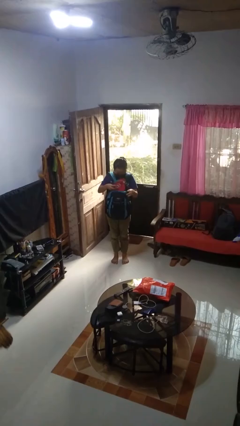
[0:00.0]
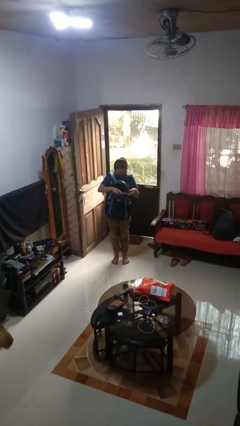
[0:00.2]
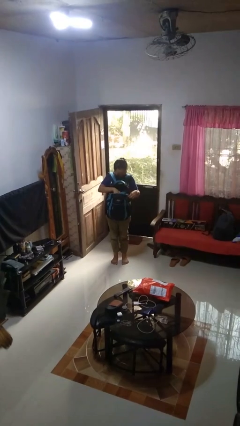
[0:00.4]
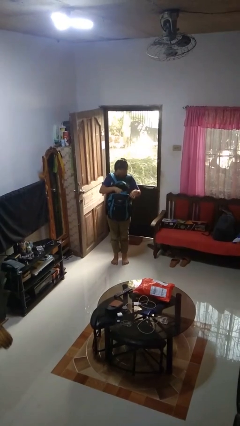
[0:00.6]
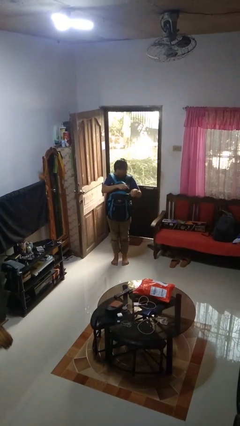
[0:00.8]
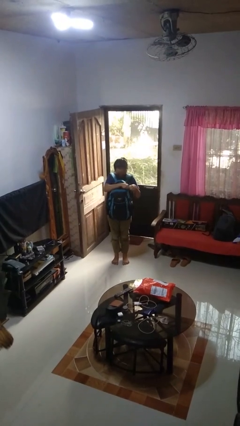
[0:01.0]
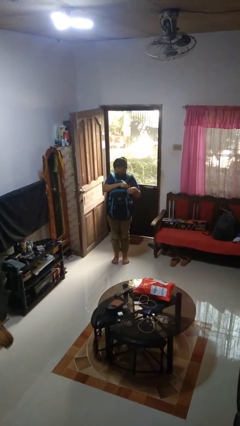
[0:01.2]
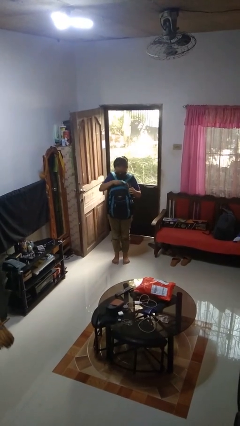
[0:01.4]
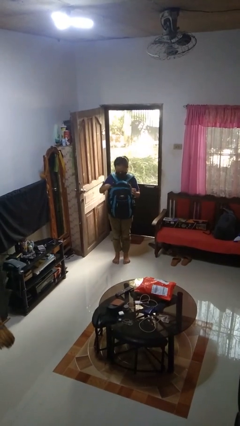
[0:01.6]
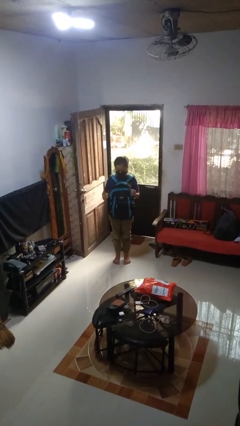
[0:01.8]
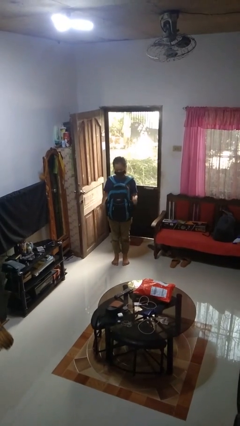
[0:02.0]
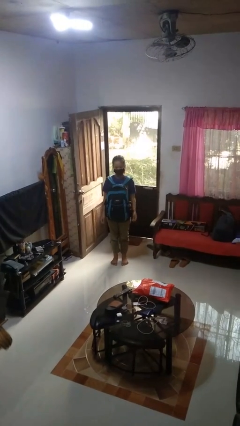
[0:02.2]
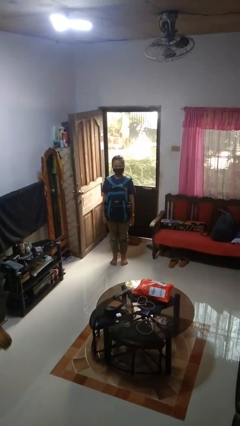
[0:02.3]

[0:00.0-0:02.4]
person puts object into backpack

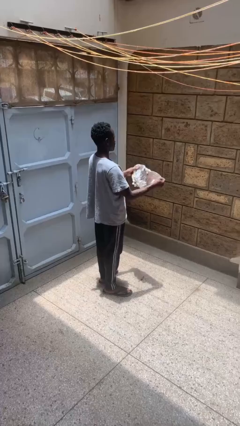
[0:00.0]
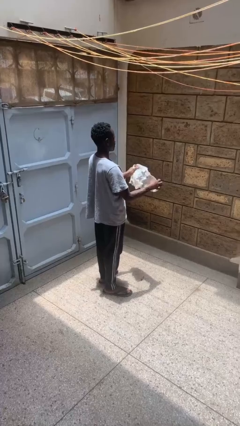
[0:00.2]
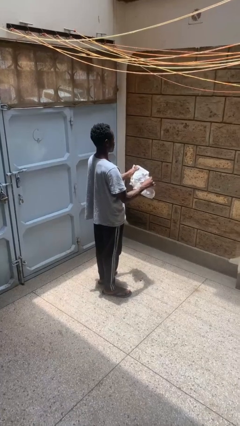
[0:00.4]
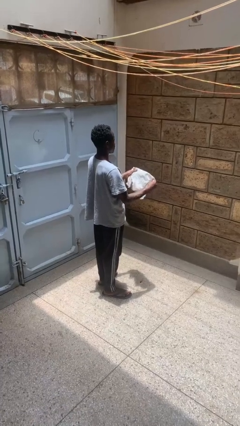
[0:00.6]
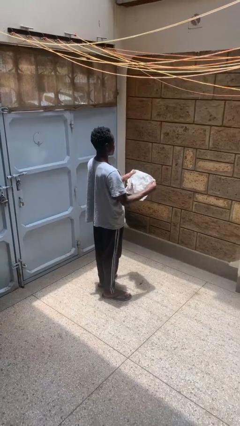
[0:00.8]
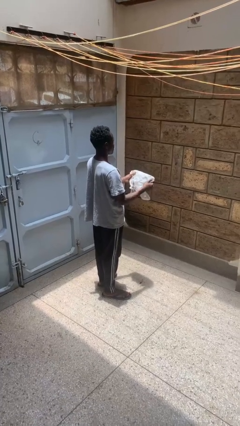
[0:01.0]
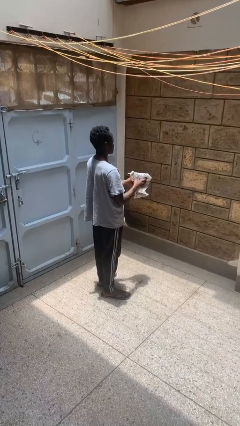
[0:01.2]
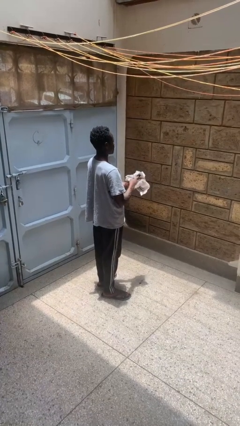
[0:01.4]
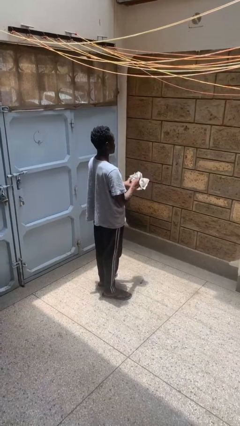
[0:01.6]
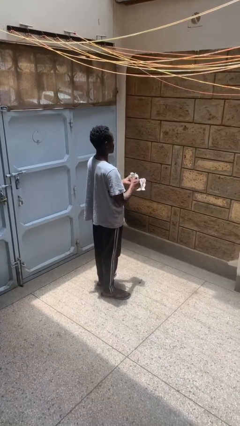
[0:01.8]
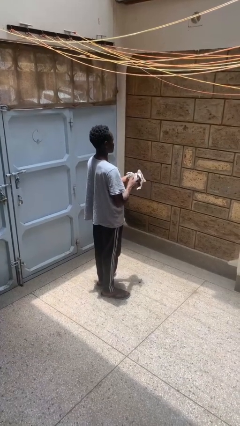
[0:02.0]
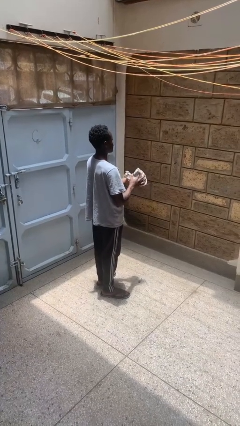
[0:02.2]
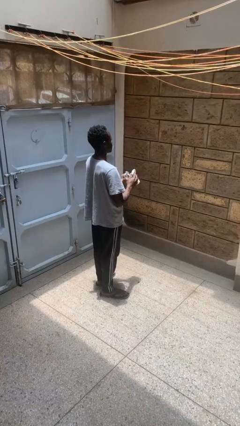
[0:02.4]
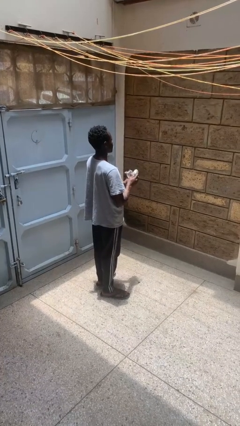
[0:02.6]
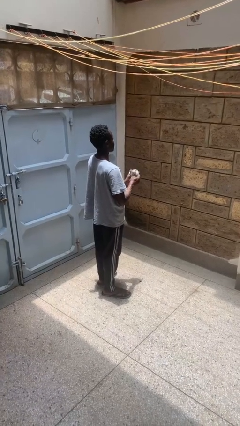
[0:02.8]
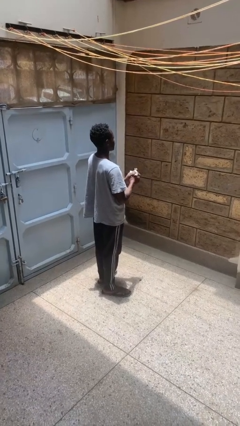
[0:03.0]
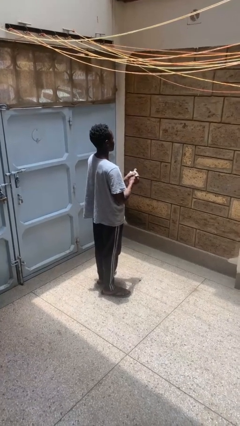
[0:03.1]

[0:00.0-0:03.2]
person crumples paper

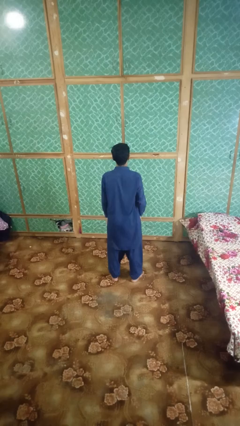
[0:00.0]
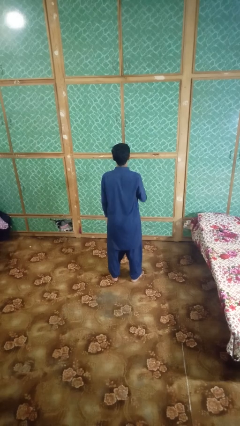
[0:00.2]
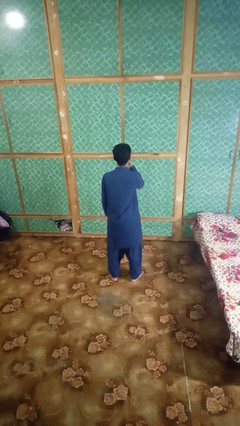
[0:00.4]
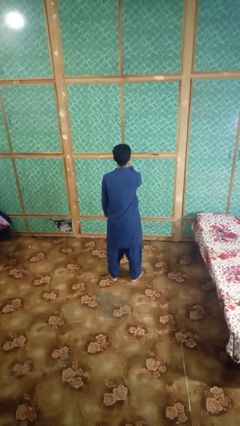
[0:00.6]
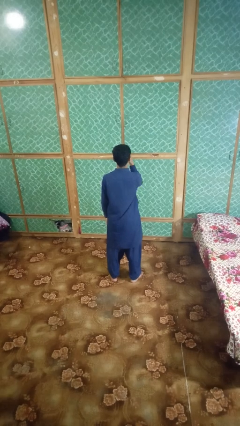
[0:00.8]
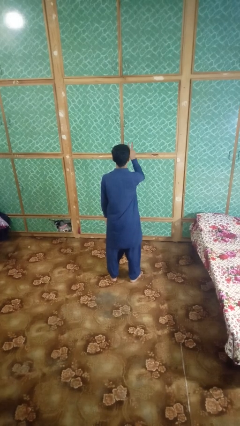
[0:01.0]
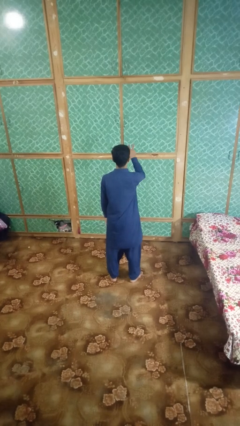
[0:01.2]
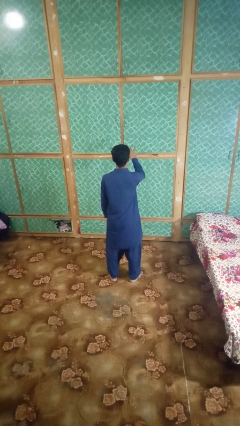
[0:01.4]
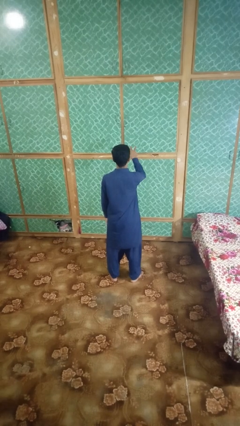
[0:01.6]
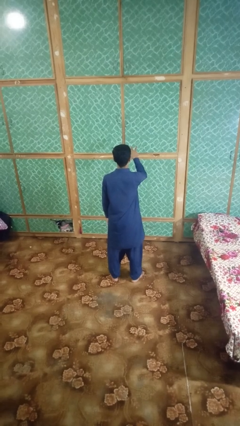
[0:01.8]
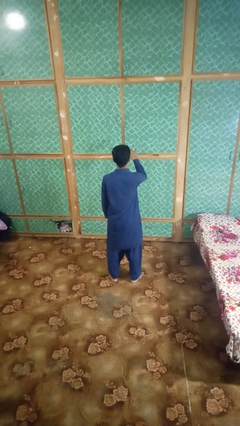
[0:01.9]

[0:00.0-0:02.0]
person gestures watch closely

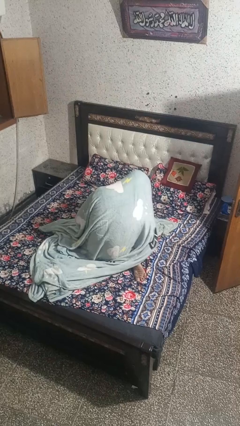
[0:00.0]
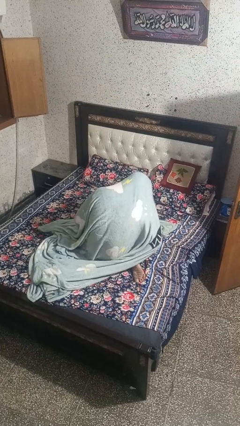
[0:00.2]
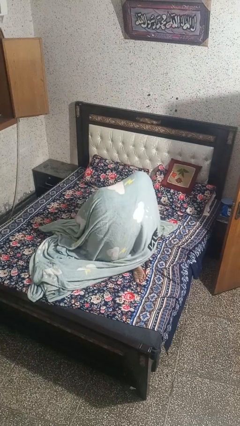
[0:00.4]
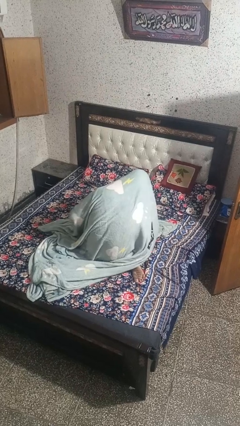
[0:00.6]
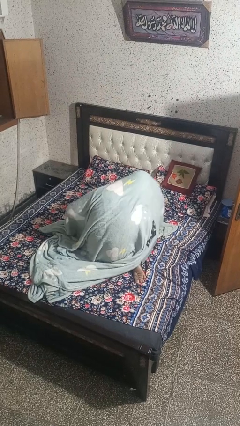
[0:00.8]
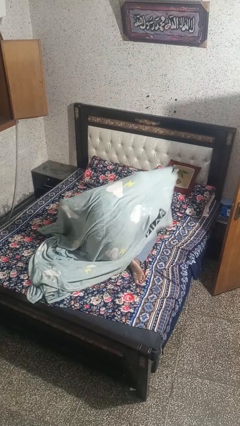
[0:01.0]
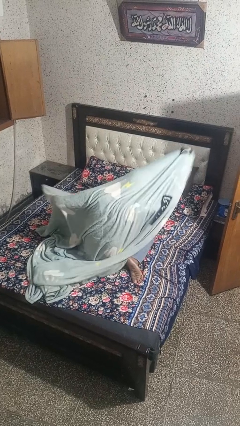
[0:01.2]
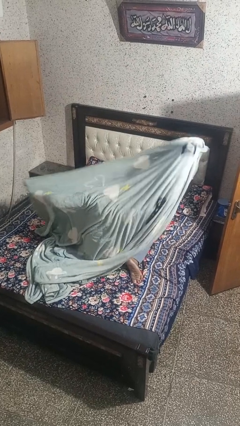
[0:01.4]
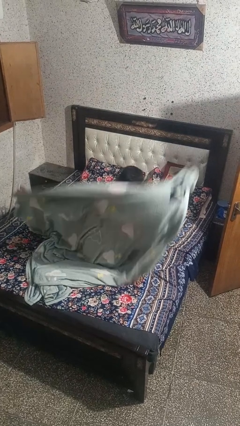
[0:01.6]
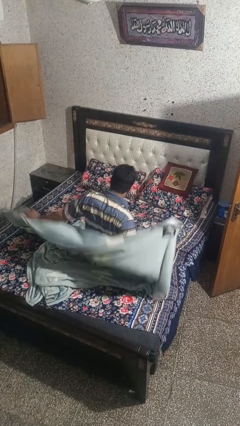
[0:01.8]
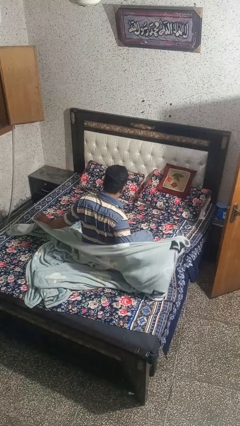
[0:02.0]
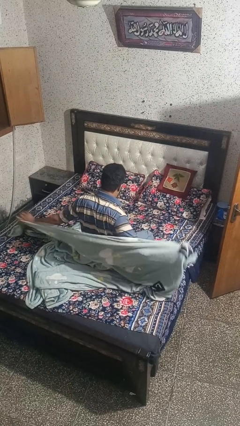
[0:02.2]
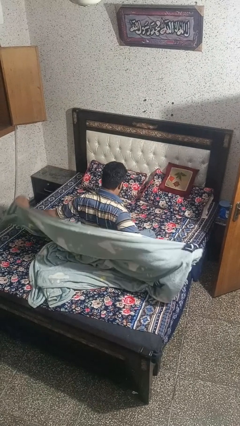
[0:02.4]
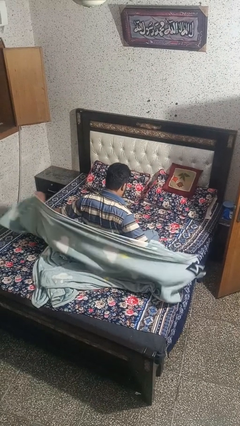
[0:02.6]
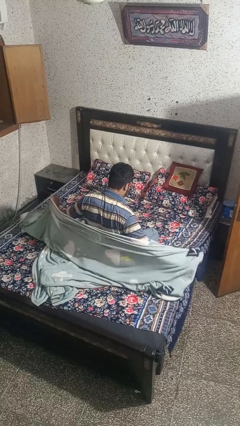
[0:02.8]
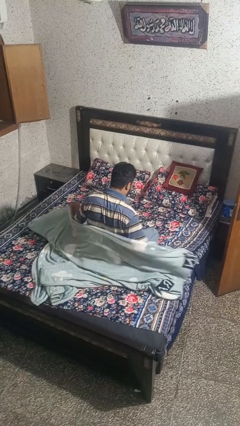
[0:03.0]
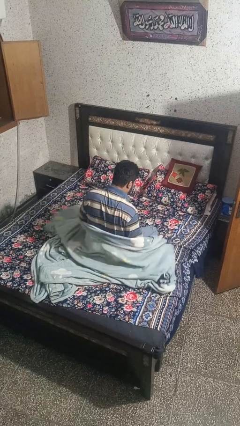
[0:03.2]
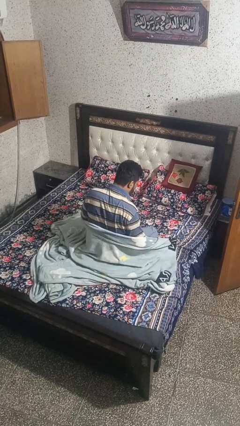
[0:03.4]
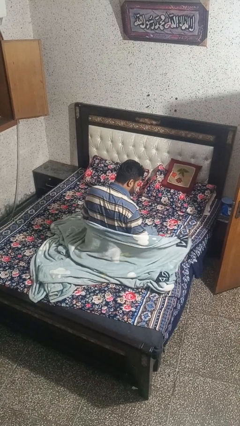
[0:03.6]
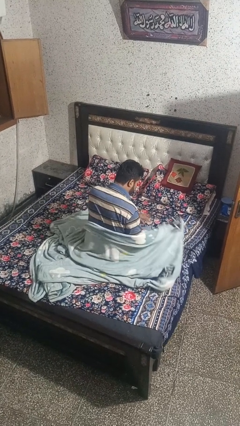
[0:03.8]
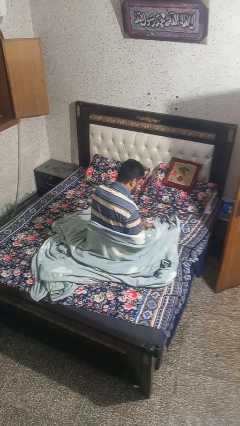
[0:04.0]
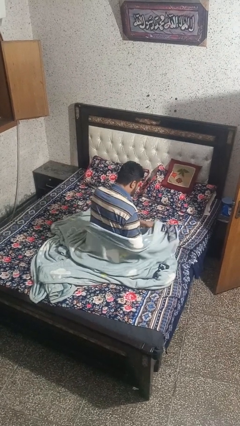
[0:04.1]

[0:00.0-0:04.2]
person uncovers with blanket

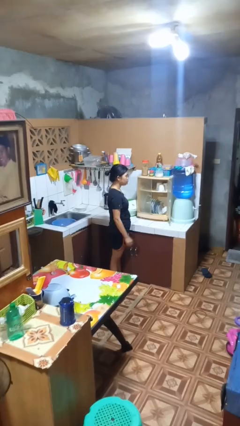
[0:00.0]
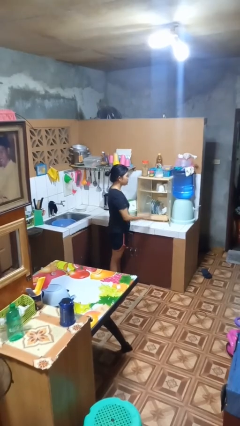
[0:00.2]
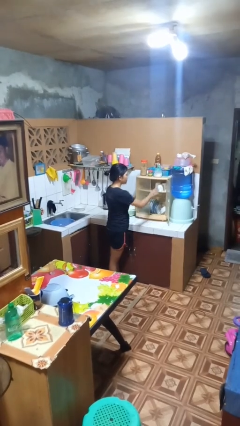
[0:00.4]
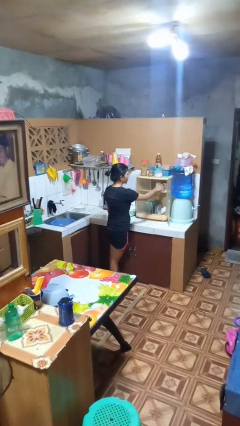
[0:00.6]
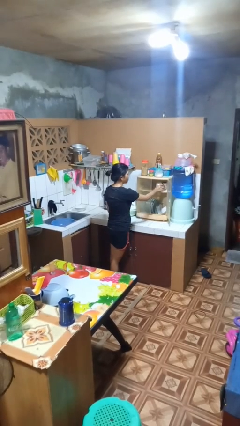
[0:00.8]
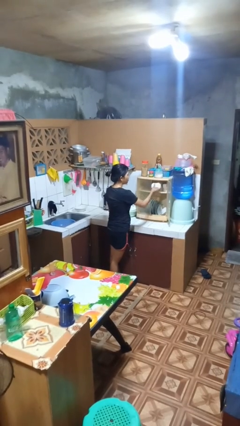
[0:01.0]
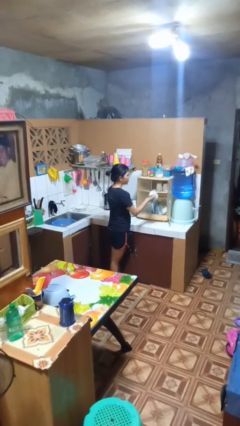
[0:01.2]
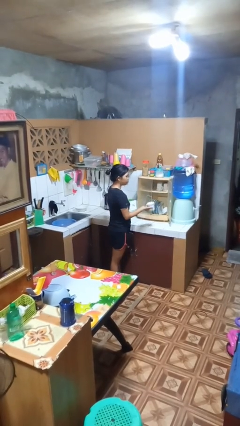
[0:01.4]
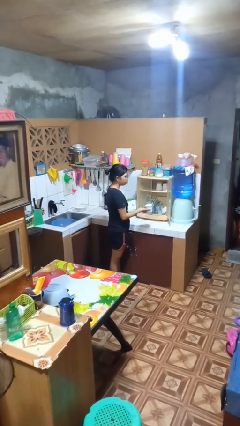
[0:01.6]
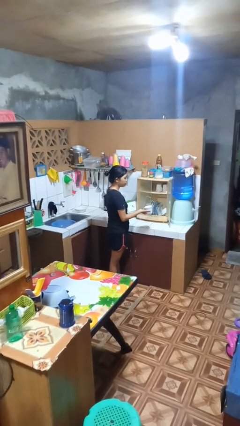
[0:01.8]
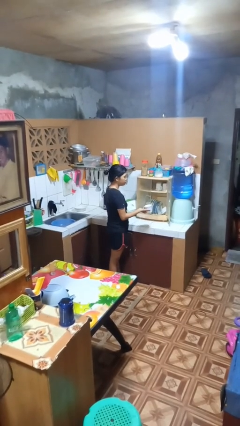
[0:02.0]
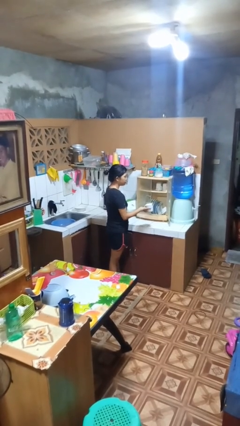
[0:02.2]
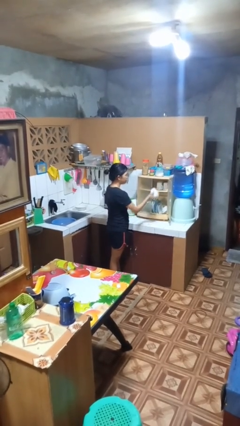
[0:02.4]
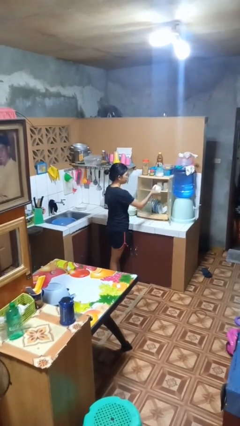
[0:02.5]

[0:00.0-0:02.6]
person takes object from kitchen drawer

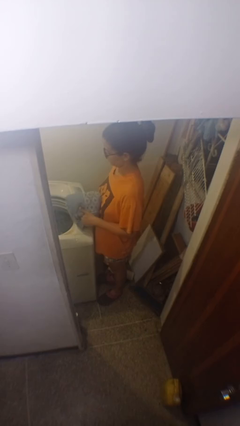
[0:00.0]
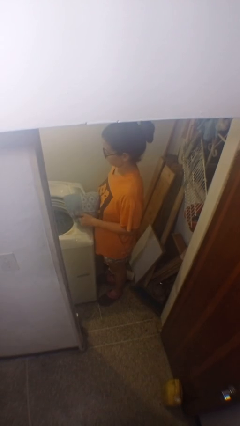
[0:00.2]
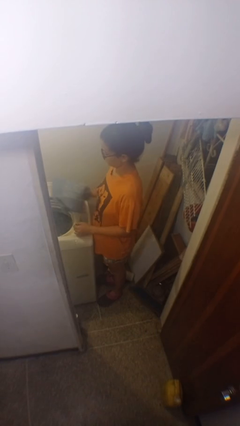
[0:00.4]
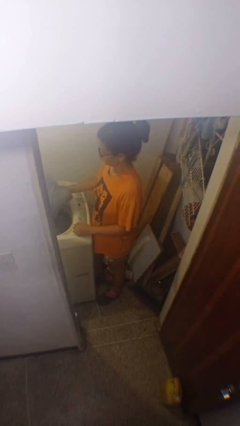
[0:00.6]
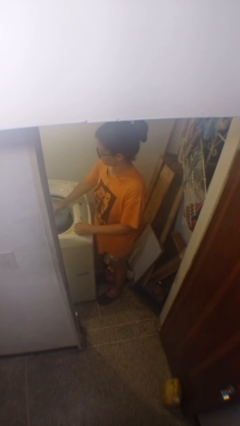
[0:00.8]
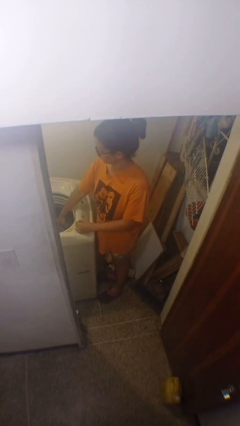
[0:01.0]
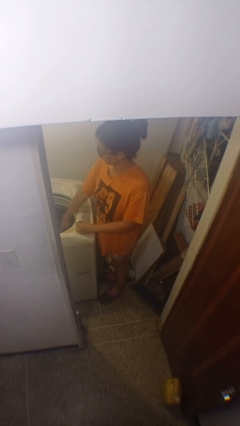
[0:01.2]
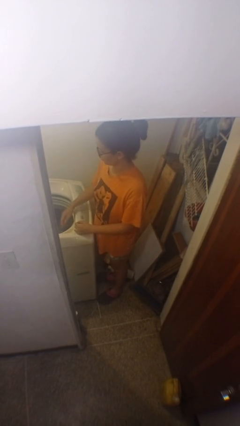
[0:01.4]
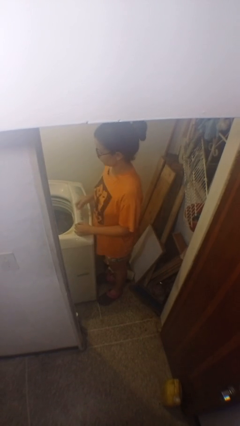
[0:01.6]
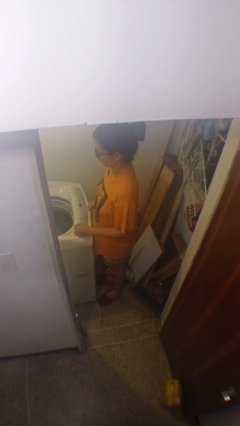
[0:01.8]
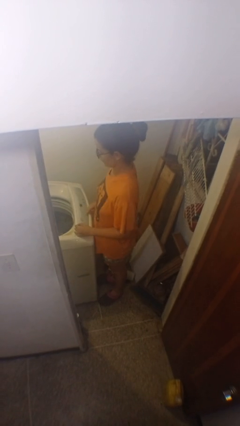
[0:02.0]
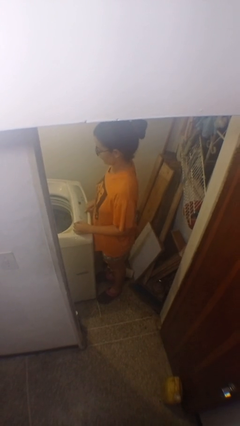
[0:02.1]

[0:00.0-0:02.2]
person loads clotheswasher

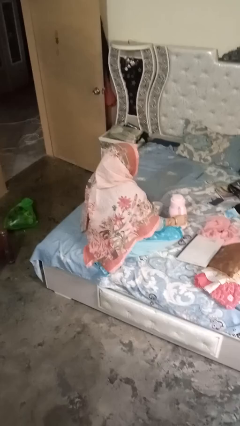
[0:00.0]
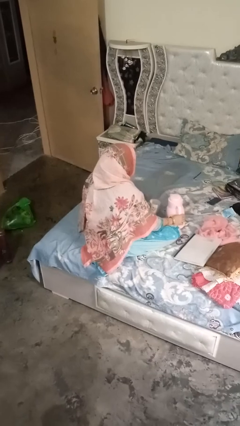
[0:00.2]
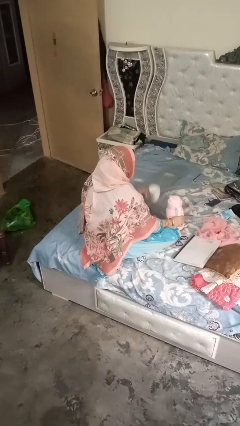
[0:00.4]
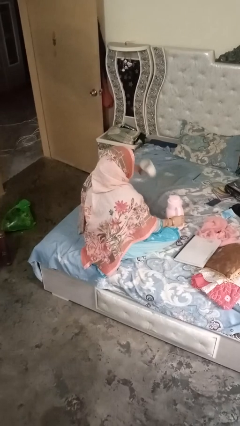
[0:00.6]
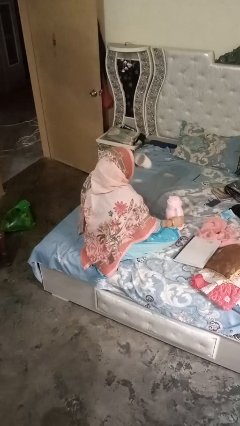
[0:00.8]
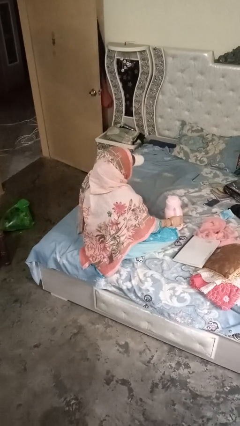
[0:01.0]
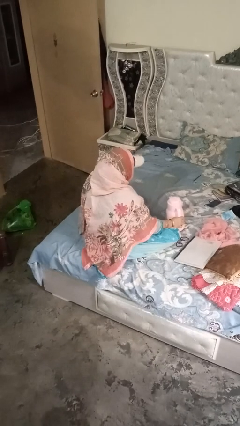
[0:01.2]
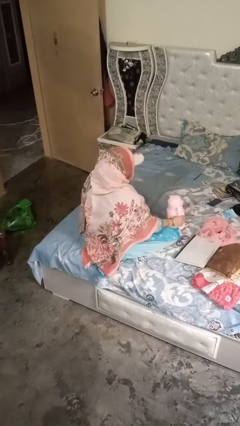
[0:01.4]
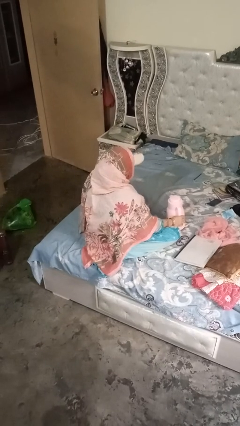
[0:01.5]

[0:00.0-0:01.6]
person pours coffee into mug
